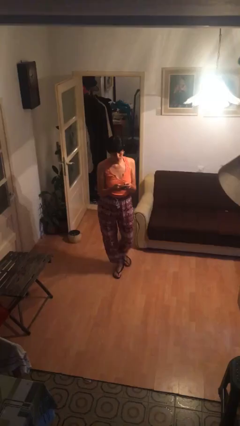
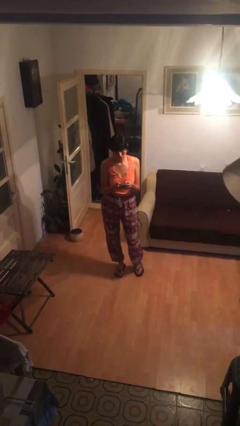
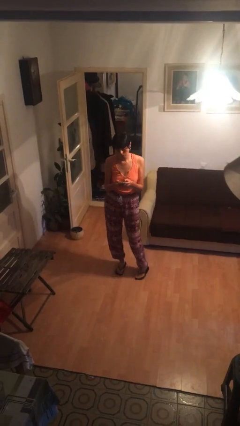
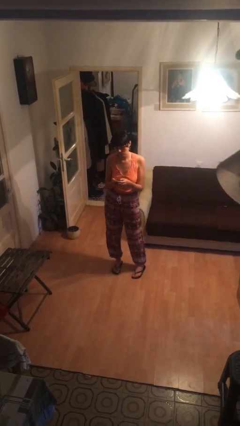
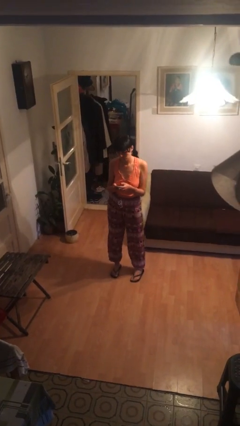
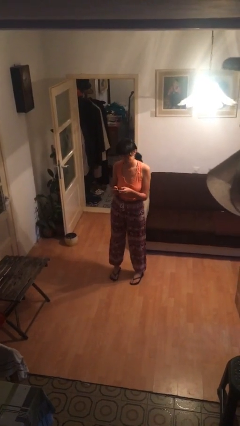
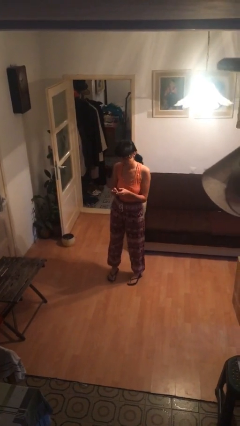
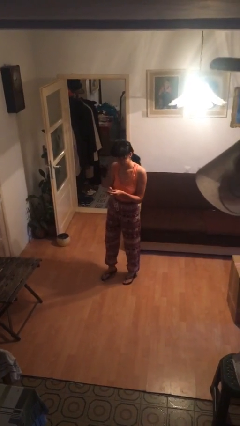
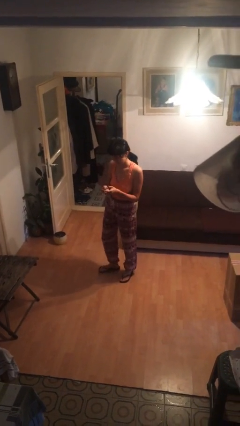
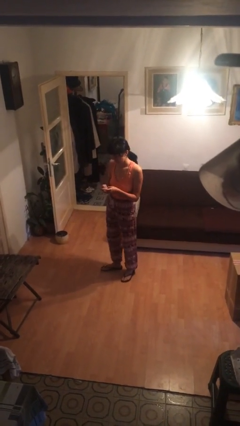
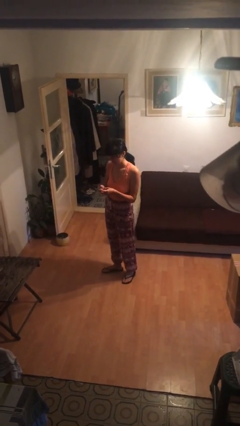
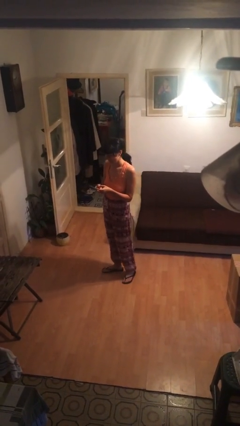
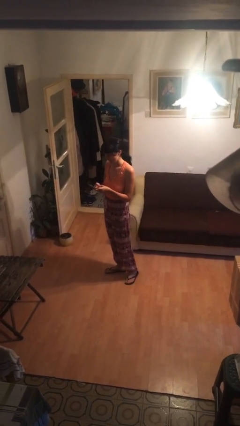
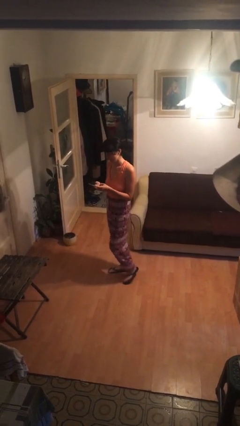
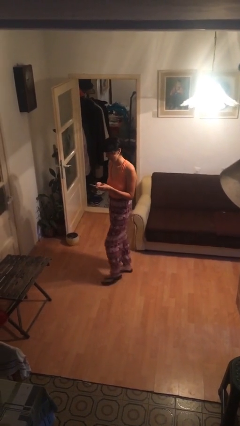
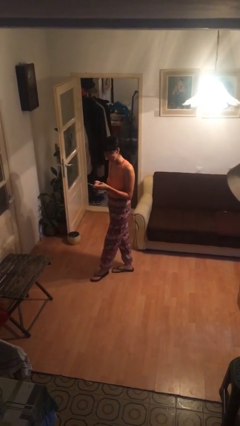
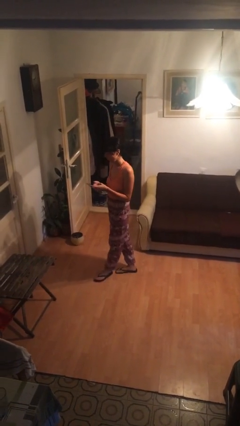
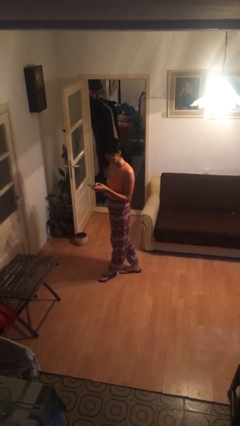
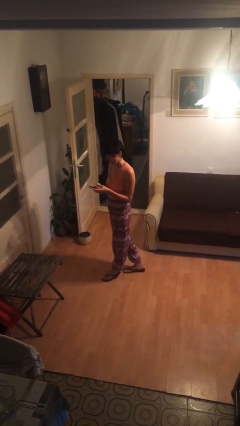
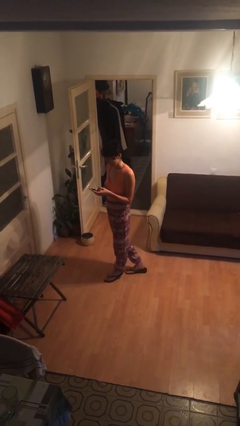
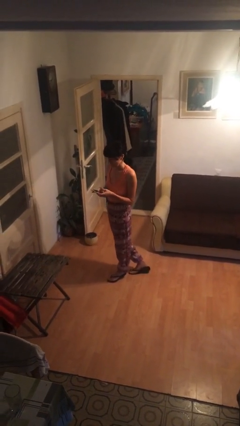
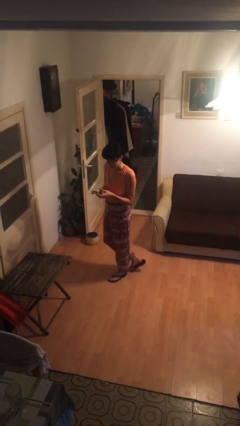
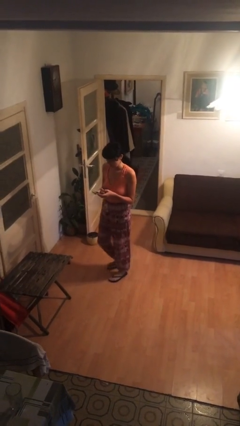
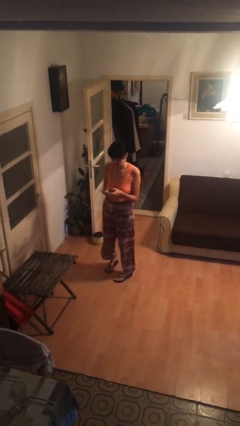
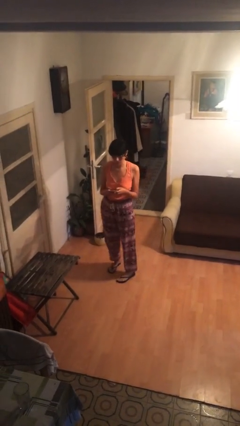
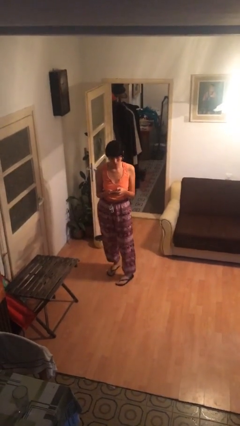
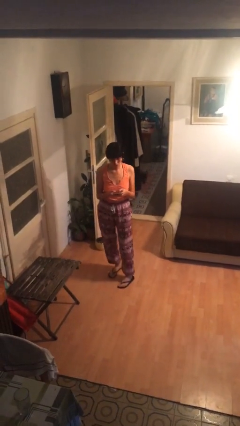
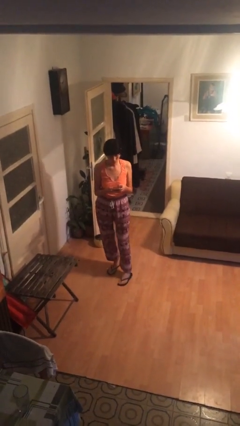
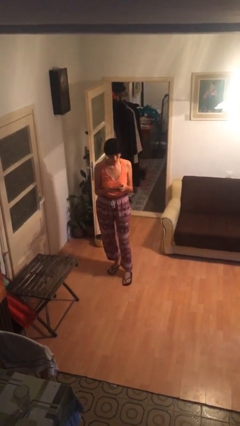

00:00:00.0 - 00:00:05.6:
person texts on phone

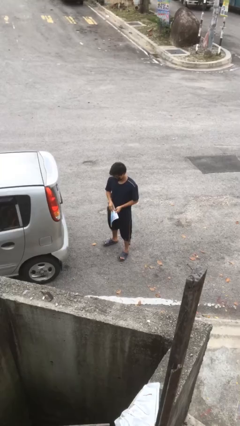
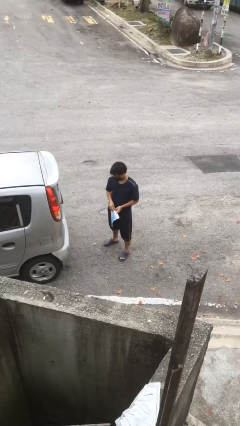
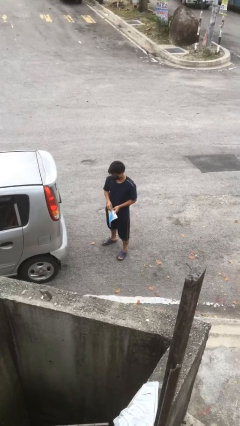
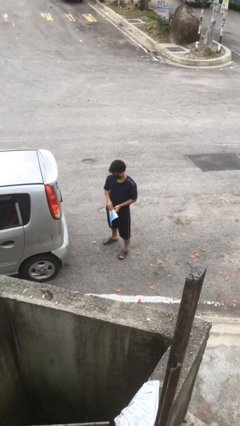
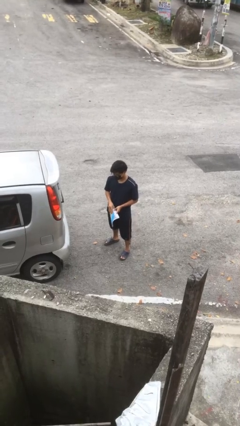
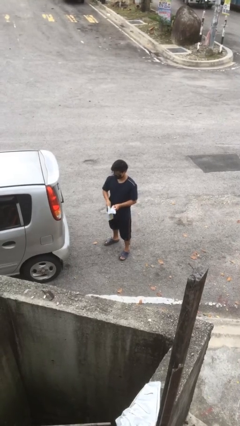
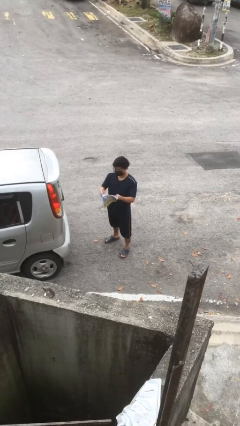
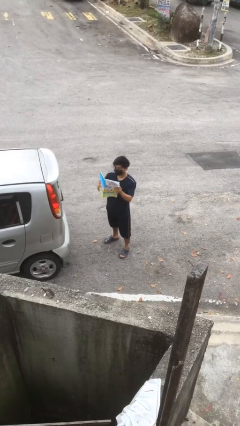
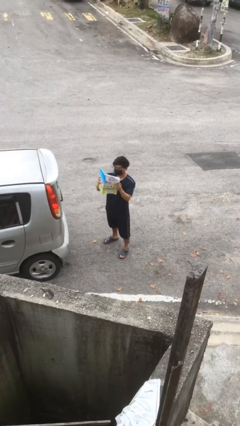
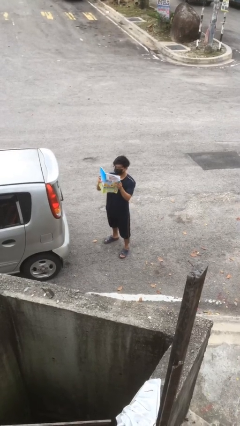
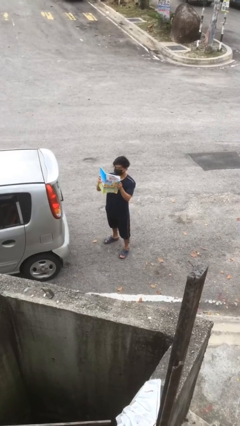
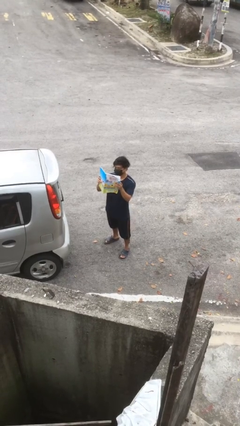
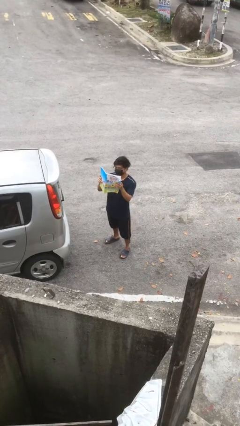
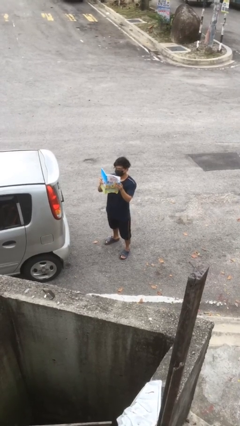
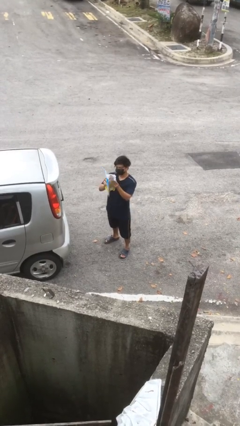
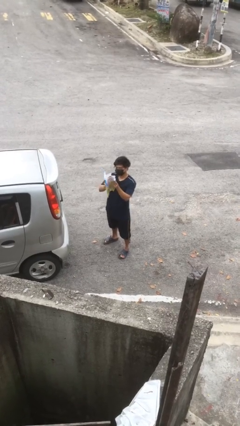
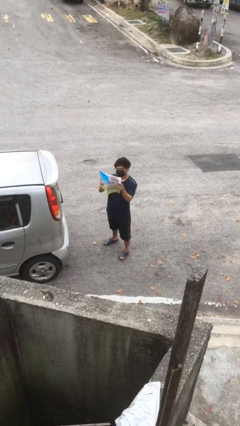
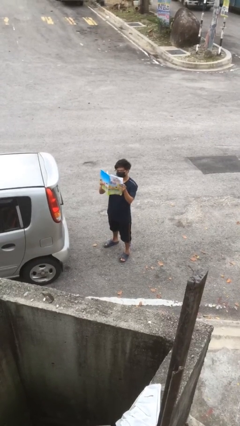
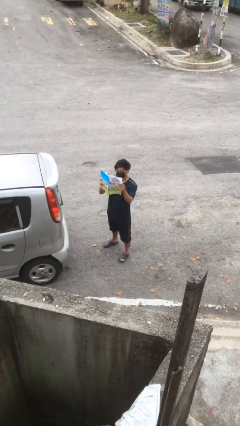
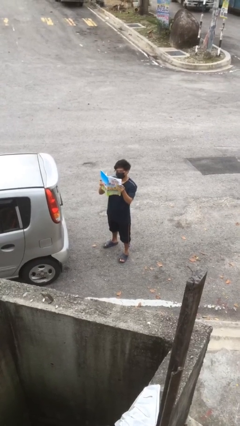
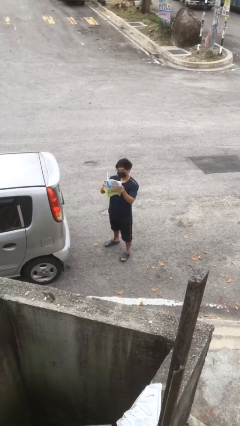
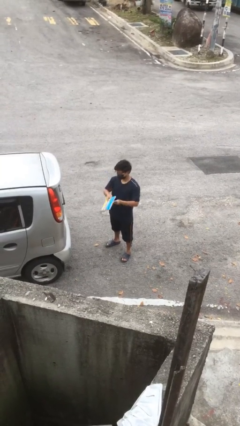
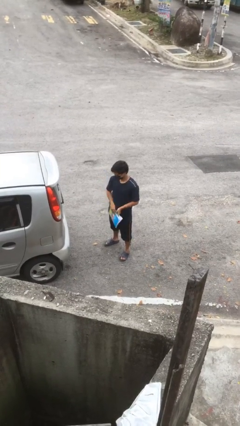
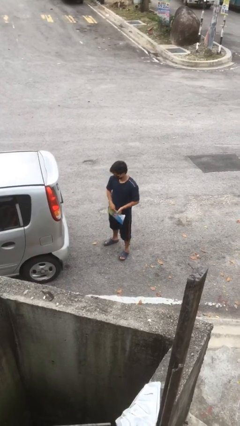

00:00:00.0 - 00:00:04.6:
person reads document

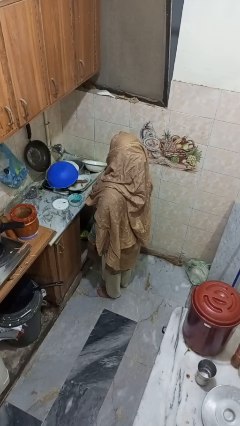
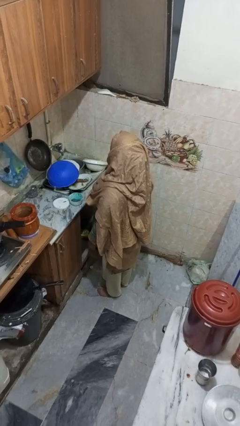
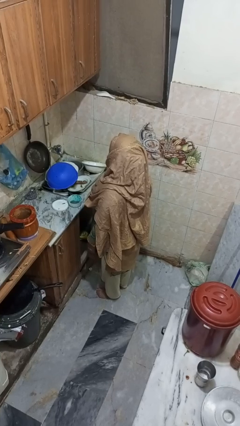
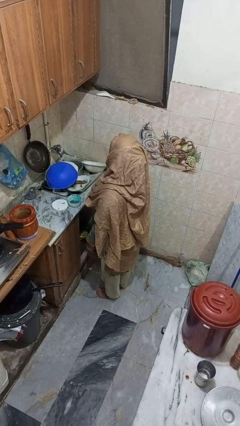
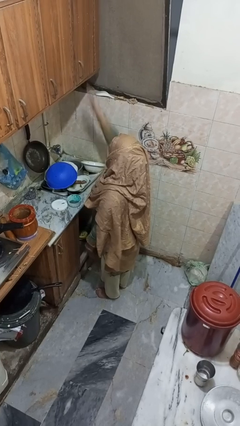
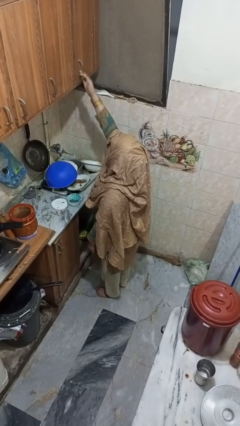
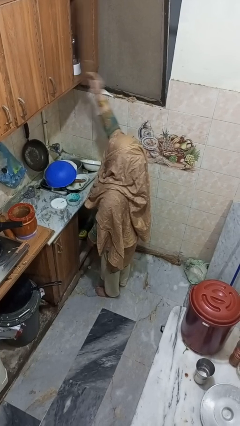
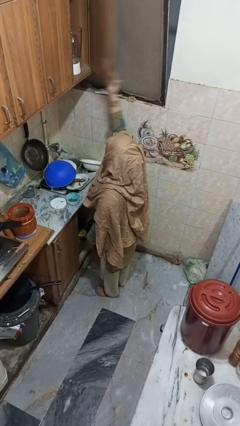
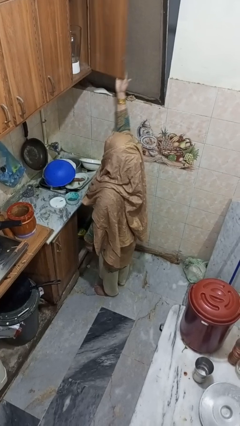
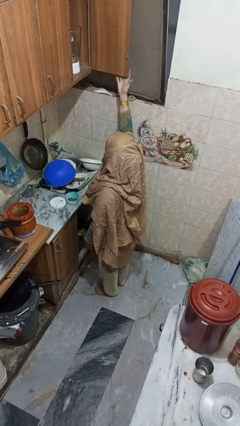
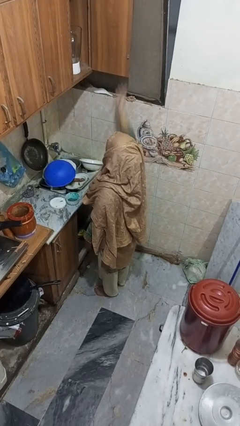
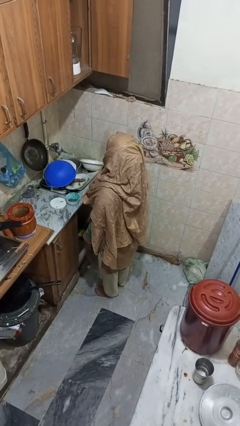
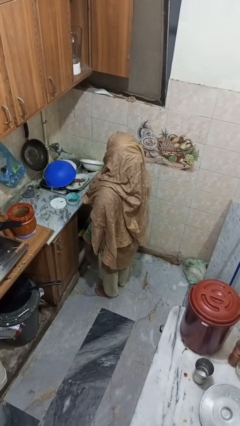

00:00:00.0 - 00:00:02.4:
person opens cabinet

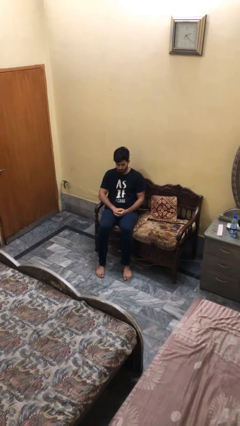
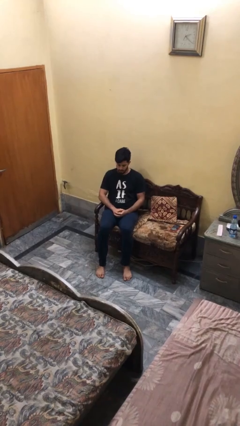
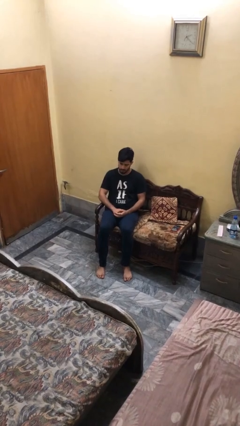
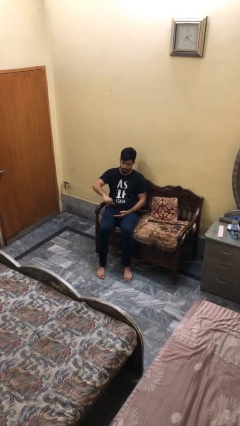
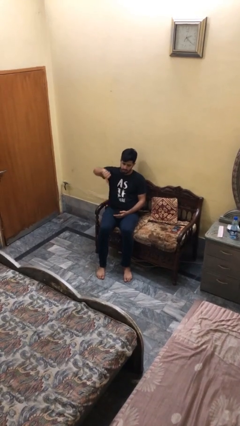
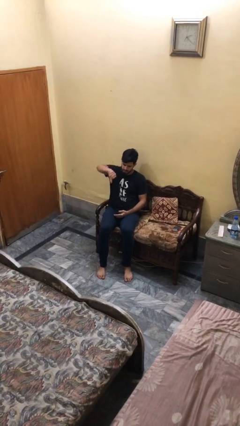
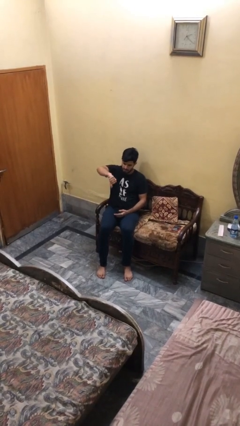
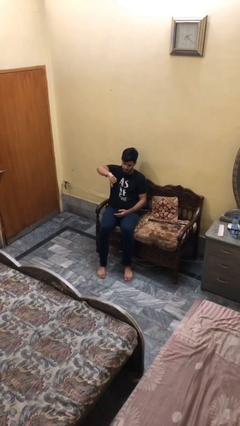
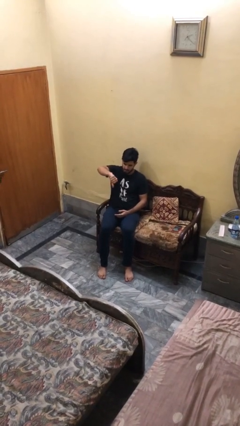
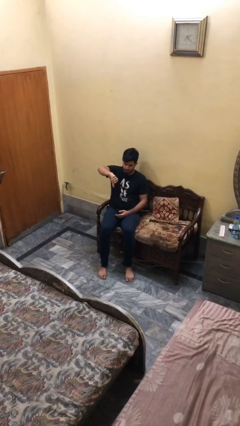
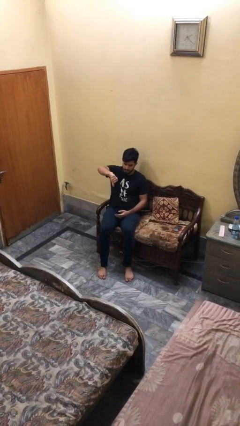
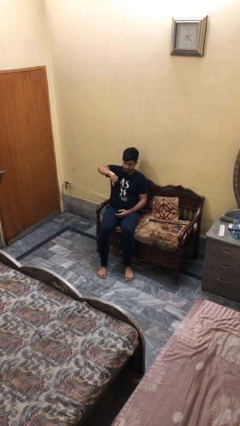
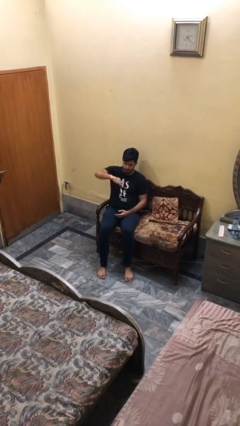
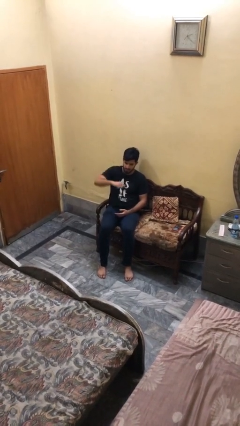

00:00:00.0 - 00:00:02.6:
person gestures thumbs down

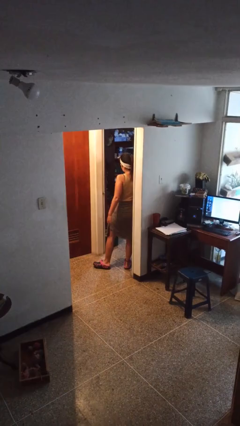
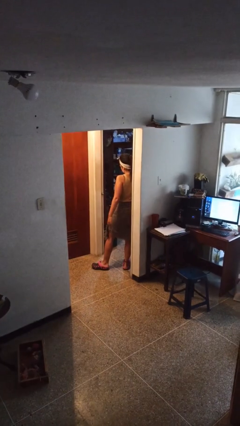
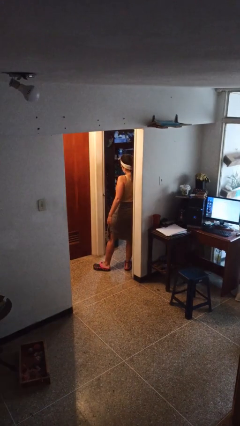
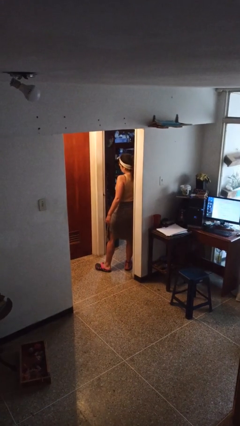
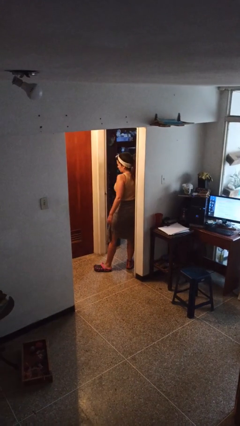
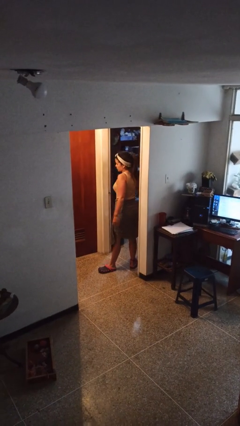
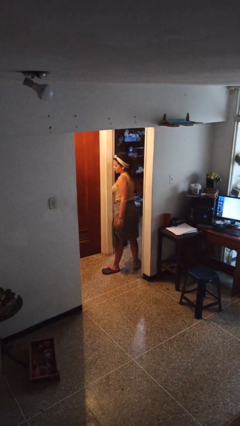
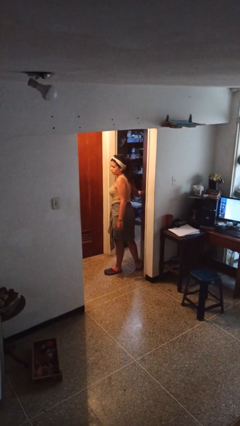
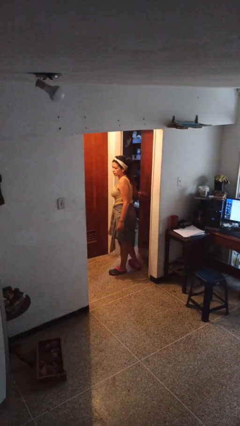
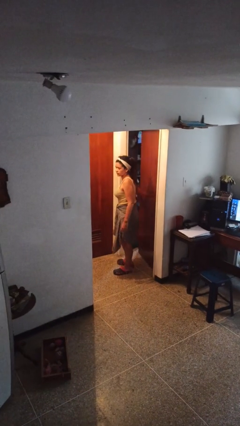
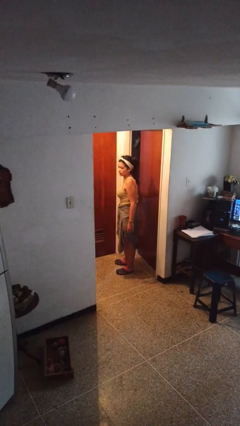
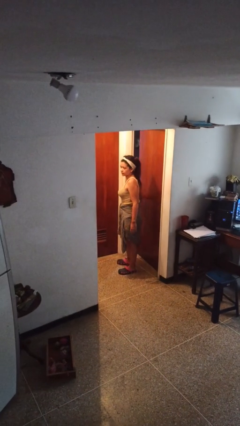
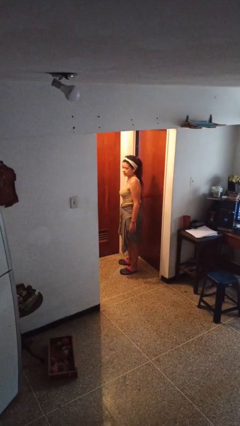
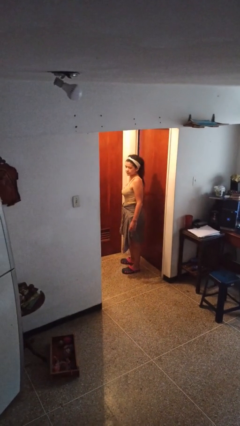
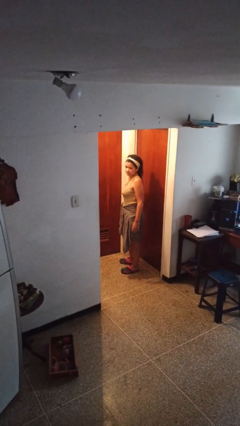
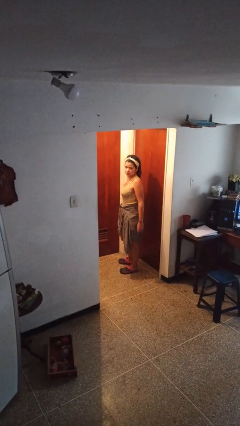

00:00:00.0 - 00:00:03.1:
person closes facility door
